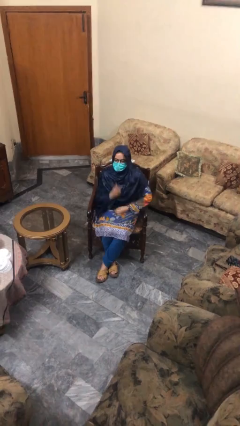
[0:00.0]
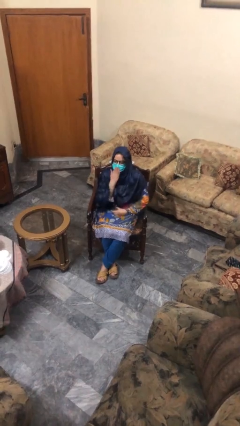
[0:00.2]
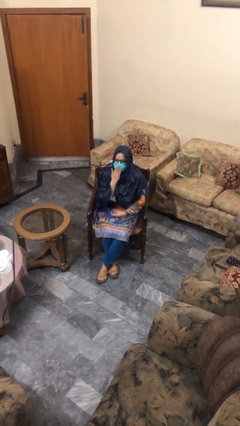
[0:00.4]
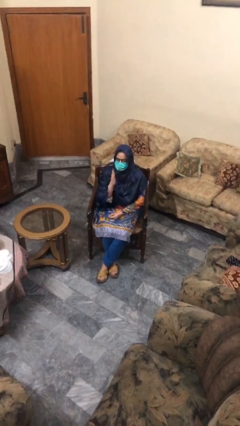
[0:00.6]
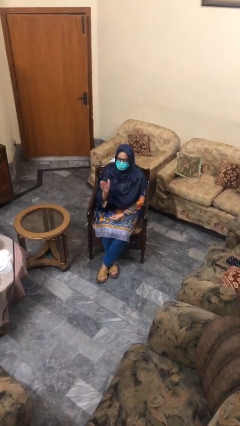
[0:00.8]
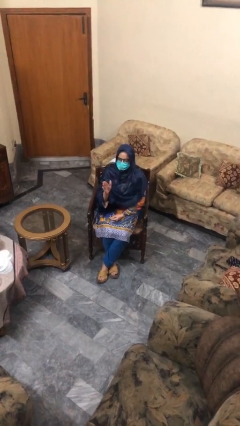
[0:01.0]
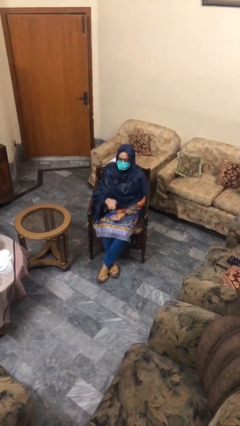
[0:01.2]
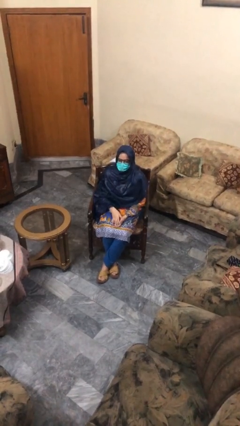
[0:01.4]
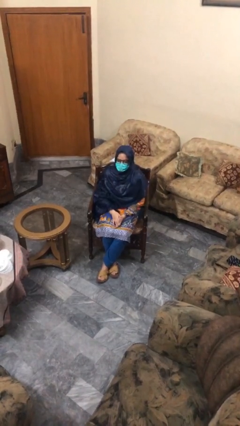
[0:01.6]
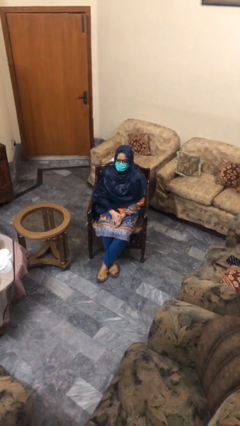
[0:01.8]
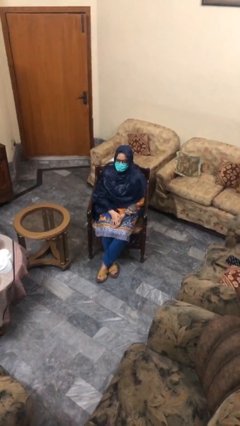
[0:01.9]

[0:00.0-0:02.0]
person gestures blow kiss

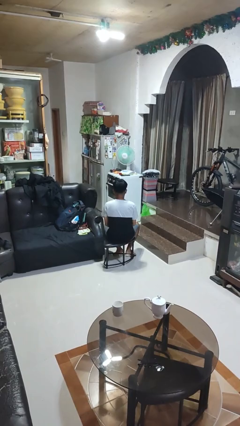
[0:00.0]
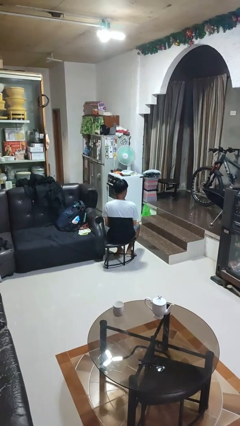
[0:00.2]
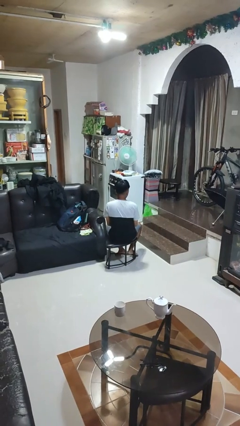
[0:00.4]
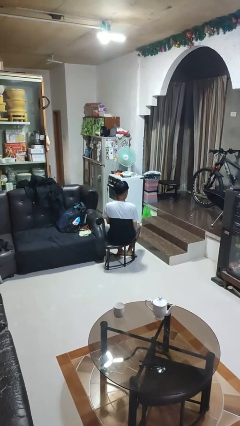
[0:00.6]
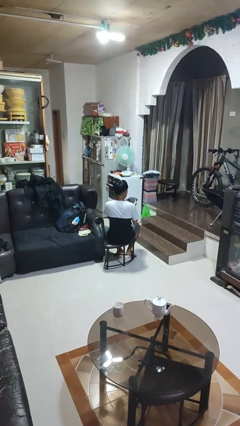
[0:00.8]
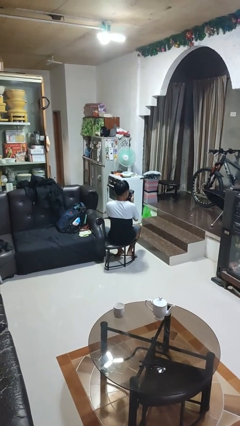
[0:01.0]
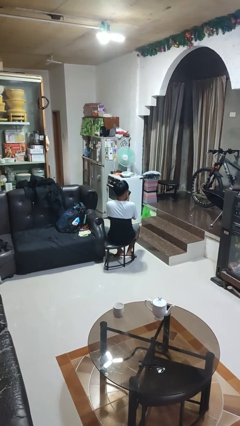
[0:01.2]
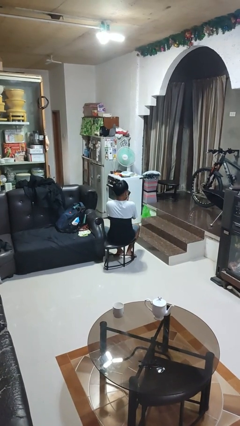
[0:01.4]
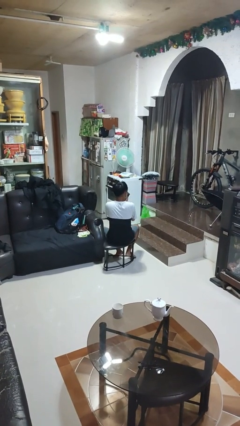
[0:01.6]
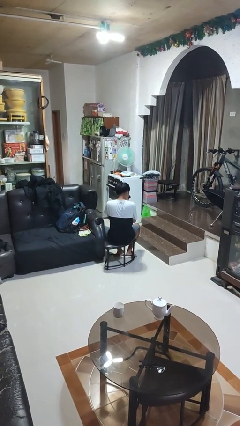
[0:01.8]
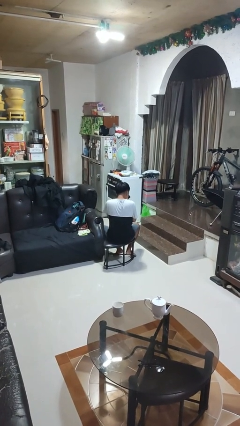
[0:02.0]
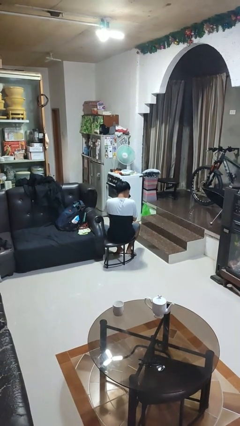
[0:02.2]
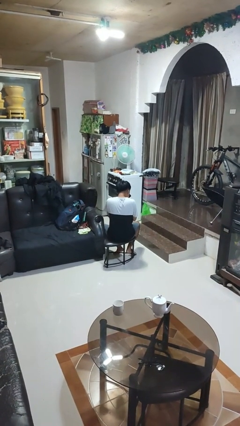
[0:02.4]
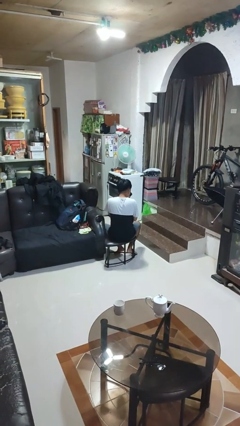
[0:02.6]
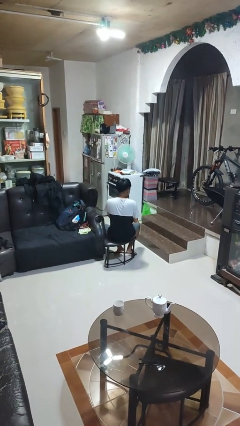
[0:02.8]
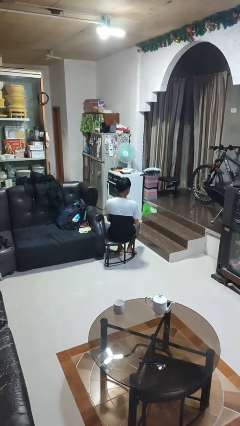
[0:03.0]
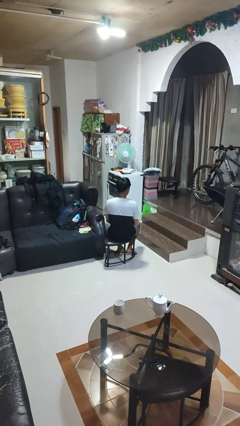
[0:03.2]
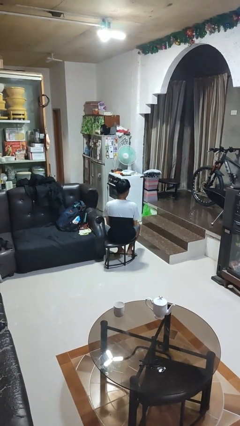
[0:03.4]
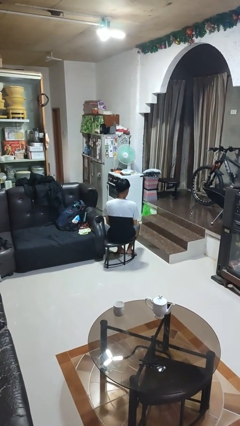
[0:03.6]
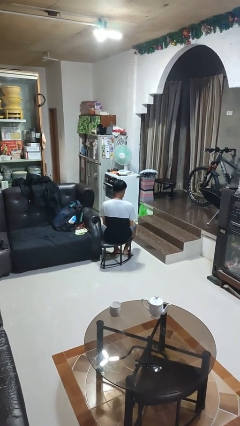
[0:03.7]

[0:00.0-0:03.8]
person blows nose

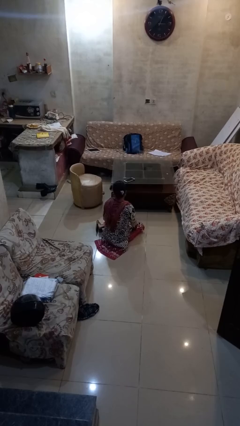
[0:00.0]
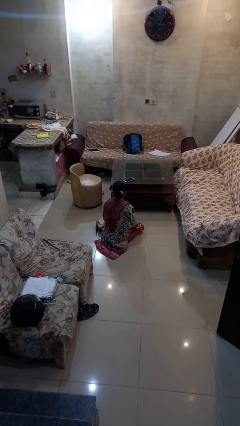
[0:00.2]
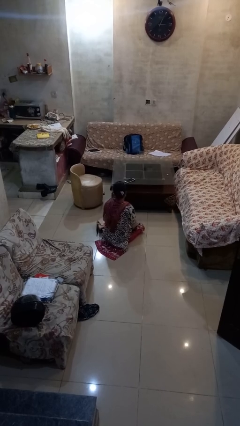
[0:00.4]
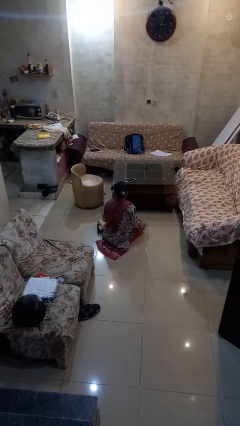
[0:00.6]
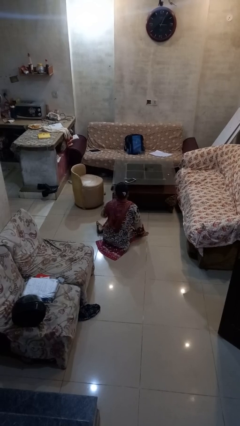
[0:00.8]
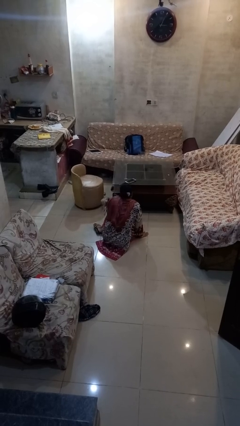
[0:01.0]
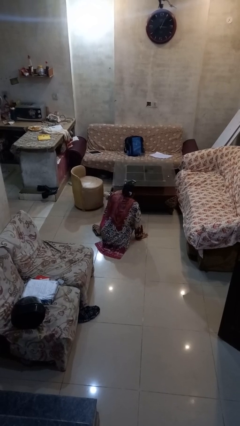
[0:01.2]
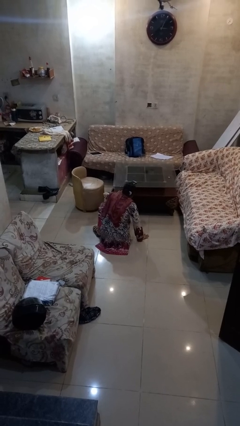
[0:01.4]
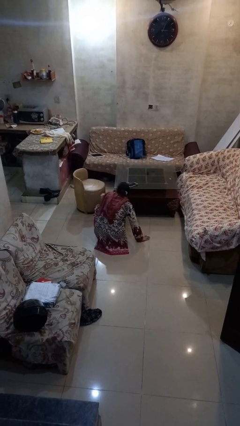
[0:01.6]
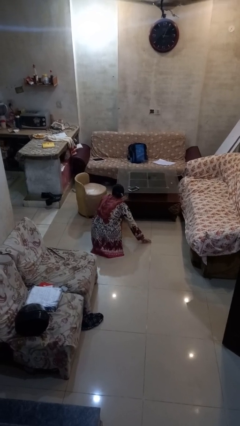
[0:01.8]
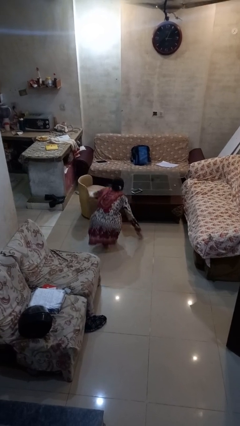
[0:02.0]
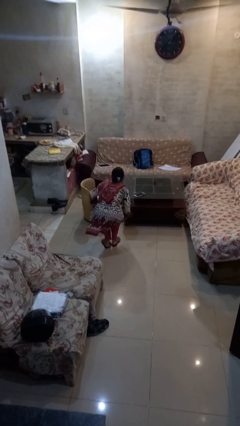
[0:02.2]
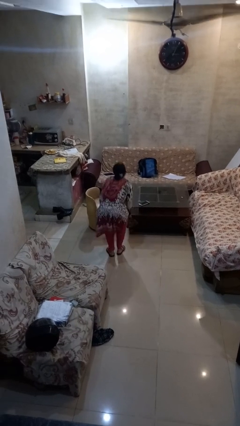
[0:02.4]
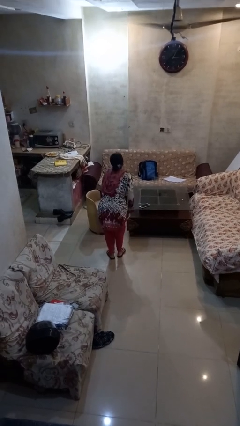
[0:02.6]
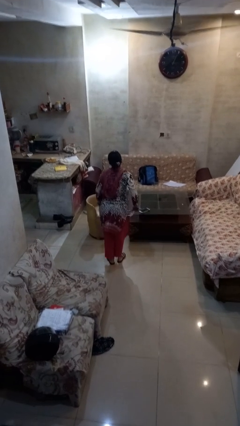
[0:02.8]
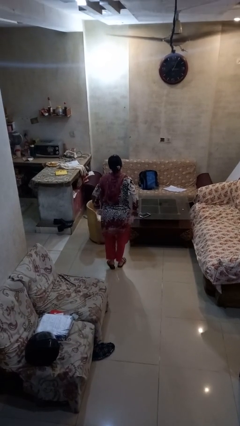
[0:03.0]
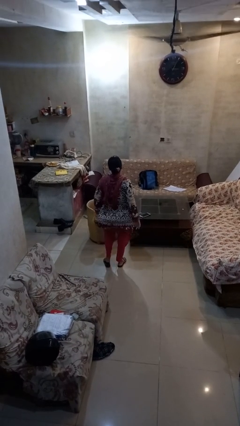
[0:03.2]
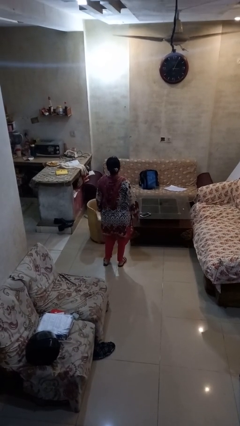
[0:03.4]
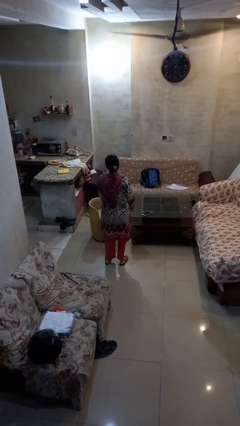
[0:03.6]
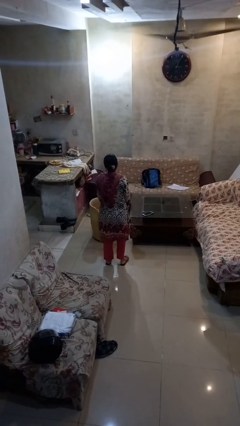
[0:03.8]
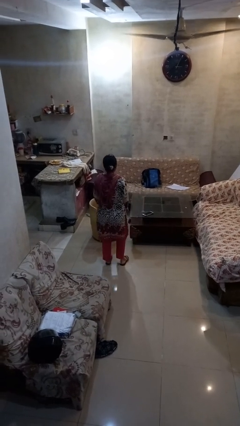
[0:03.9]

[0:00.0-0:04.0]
person stands up from floor

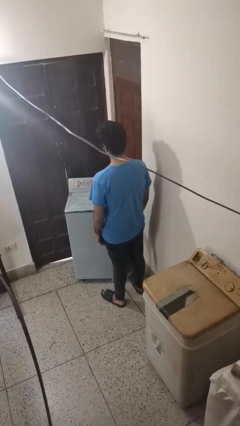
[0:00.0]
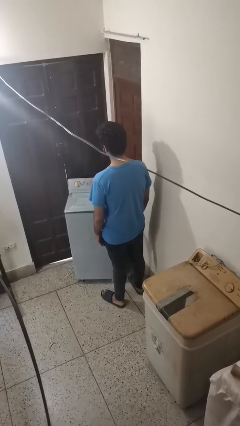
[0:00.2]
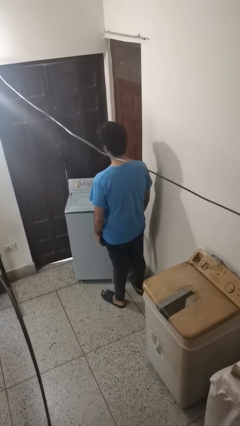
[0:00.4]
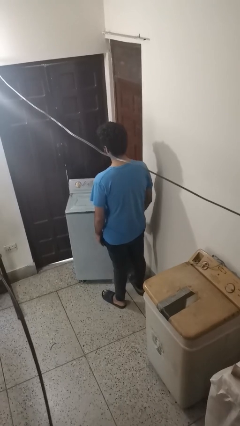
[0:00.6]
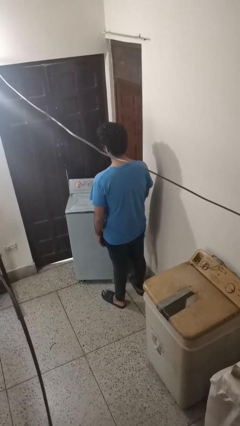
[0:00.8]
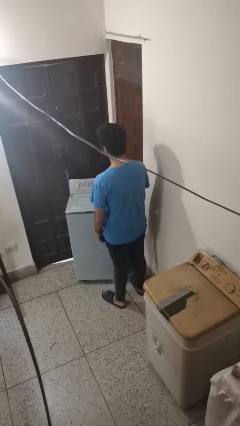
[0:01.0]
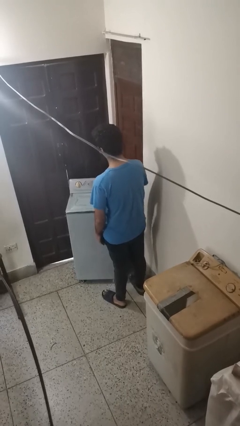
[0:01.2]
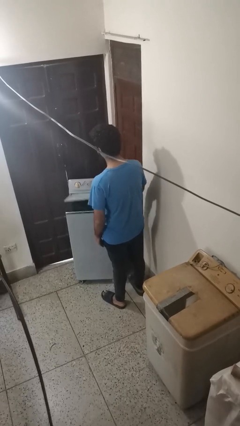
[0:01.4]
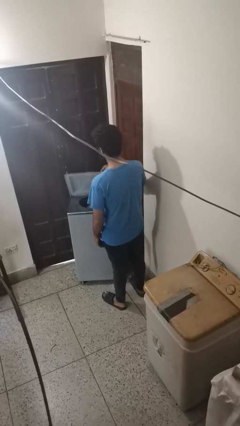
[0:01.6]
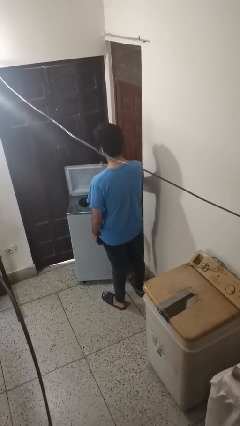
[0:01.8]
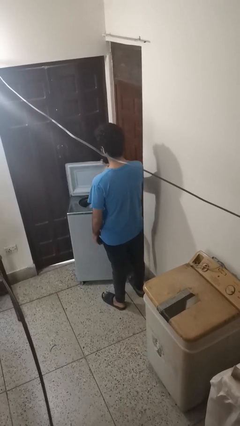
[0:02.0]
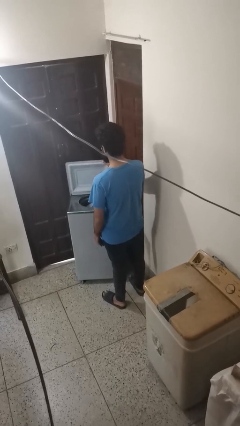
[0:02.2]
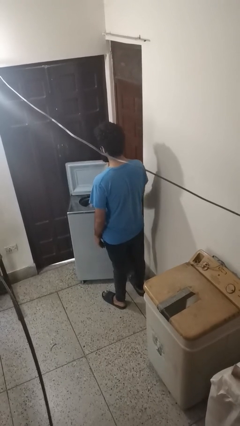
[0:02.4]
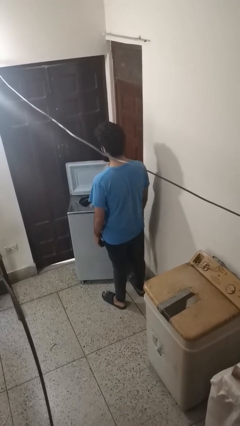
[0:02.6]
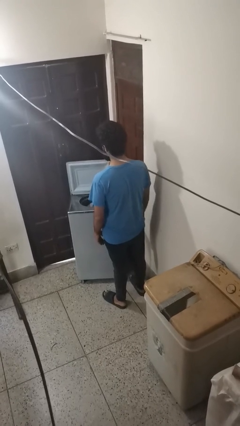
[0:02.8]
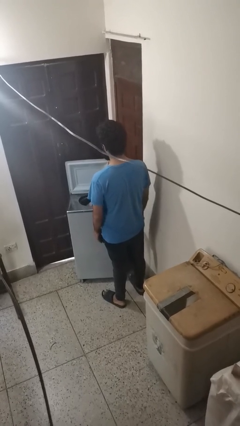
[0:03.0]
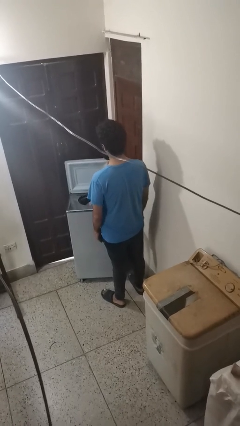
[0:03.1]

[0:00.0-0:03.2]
person opens clothes washer

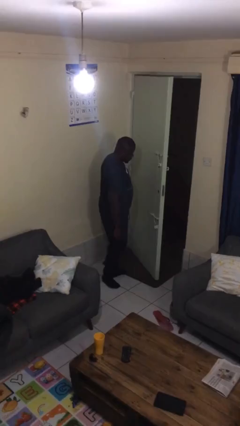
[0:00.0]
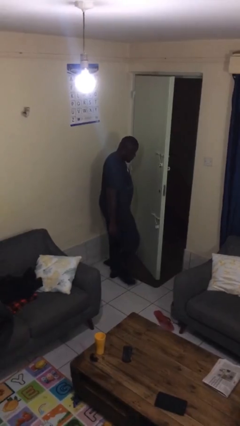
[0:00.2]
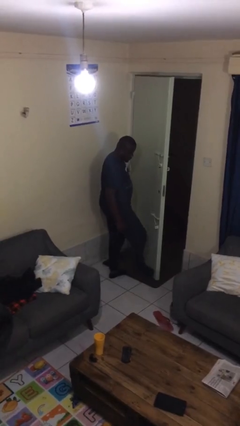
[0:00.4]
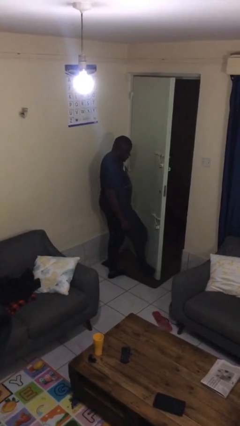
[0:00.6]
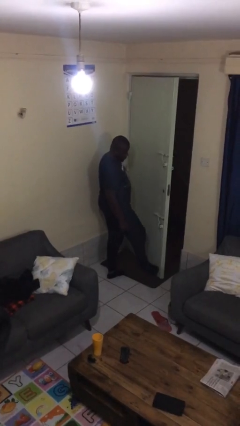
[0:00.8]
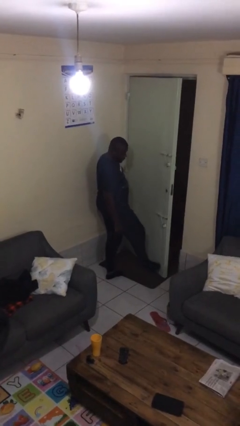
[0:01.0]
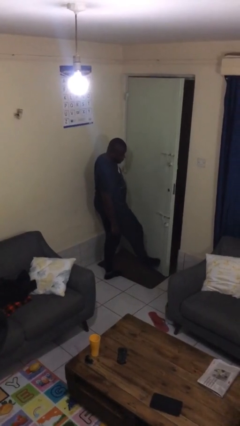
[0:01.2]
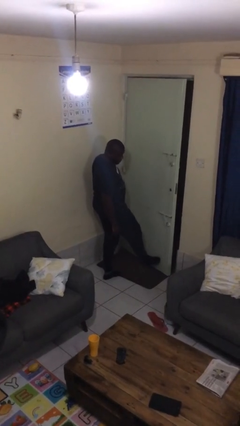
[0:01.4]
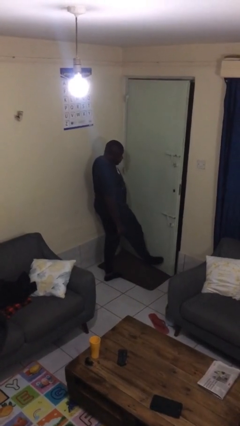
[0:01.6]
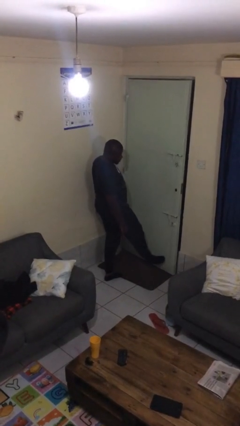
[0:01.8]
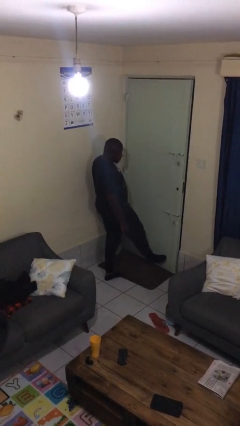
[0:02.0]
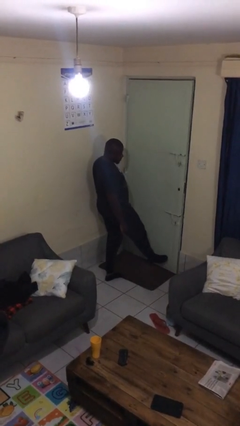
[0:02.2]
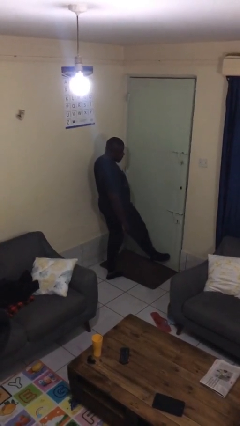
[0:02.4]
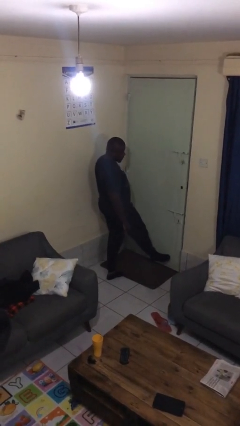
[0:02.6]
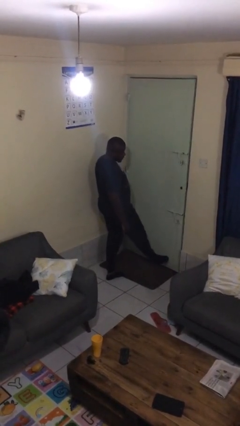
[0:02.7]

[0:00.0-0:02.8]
person closes door with foot

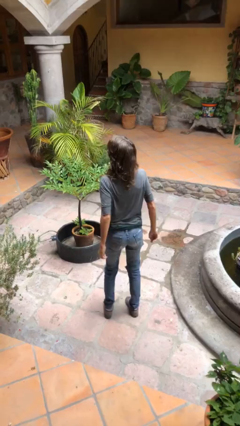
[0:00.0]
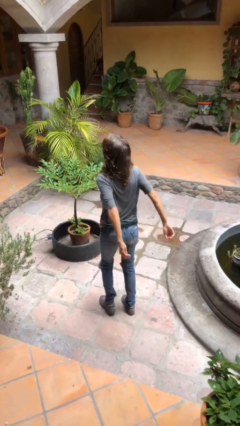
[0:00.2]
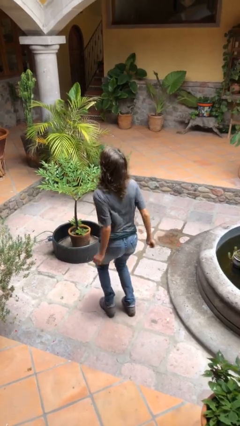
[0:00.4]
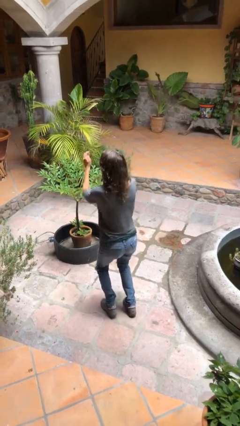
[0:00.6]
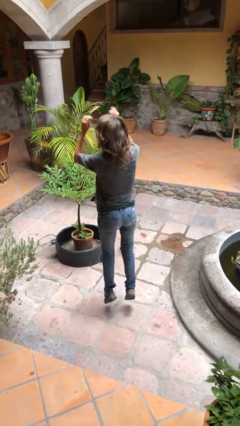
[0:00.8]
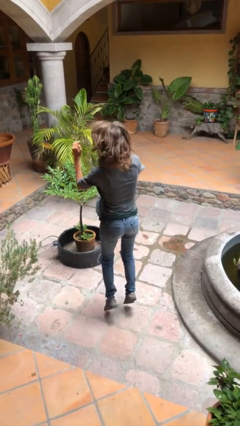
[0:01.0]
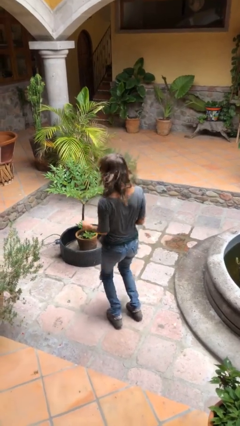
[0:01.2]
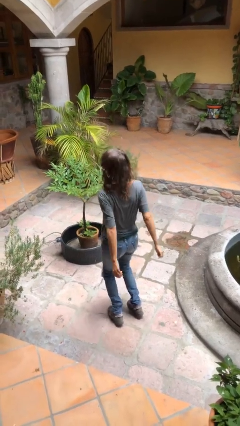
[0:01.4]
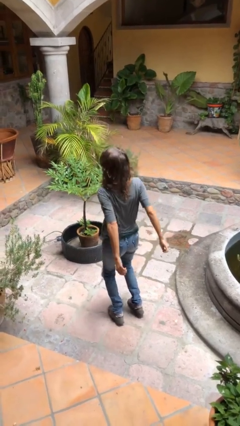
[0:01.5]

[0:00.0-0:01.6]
person jumps
